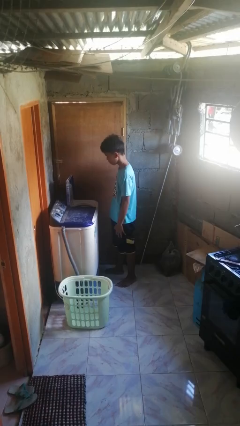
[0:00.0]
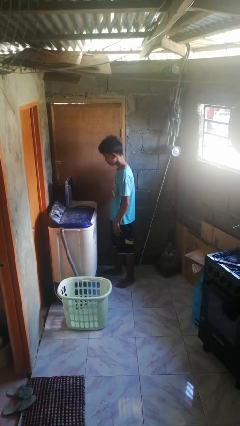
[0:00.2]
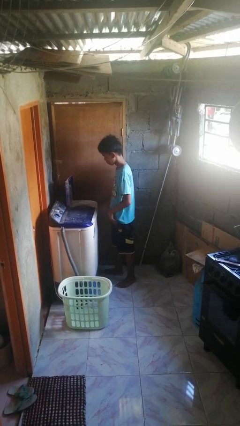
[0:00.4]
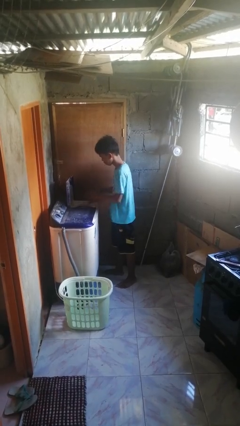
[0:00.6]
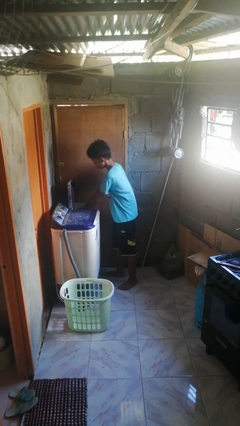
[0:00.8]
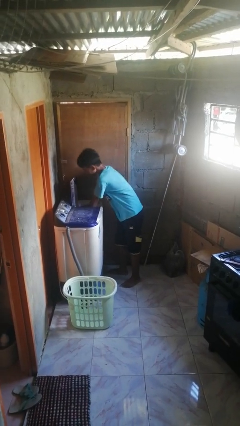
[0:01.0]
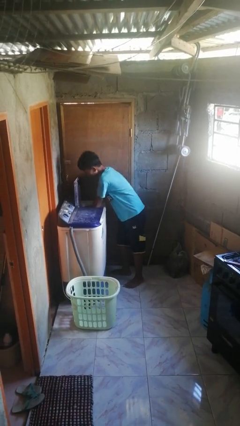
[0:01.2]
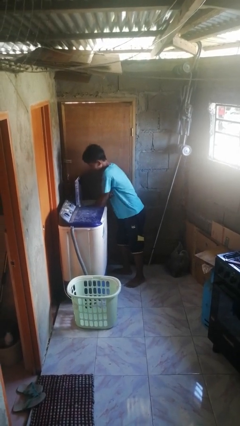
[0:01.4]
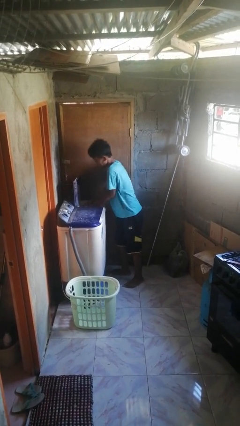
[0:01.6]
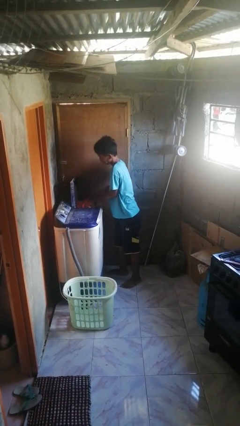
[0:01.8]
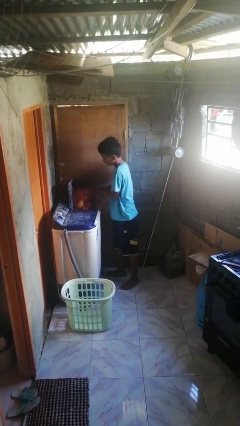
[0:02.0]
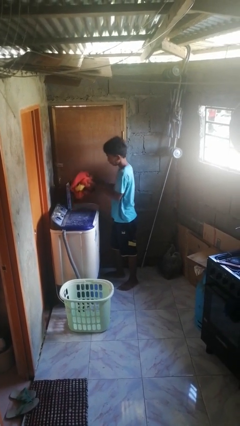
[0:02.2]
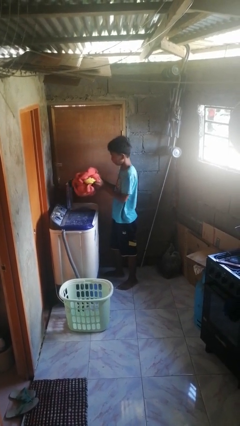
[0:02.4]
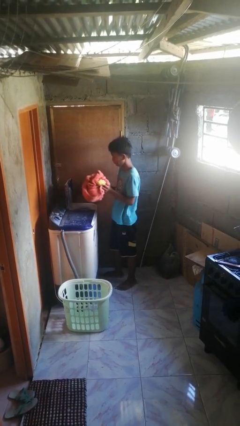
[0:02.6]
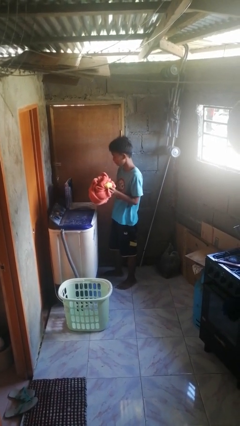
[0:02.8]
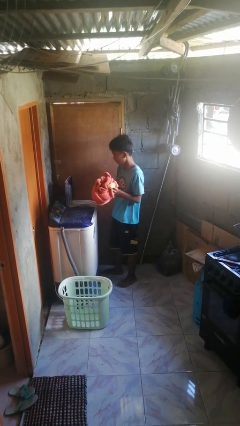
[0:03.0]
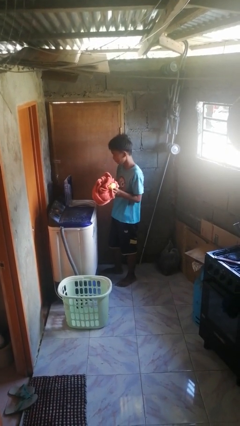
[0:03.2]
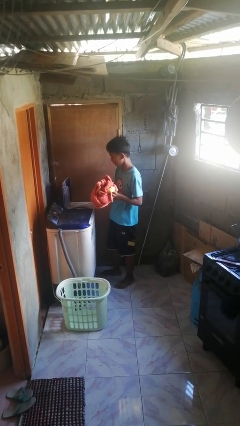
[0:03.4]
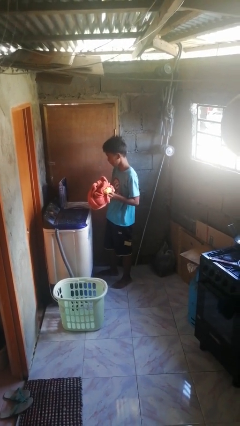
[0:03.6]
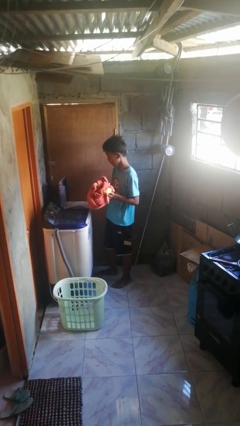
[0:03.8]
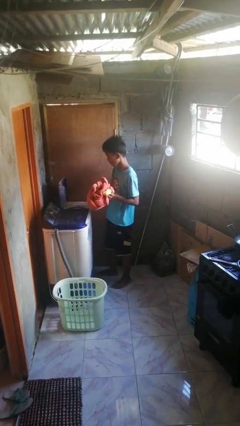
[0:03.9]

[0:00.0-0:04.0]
person unloads dryer

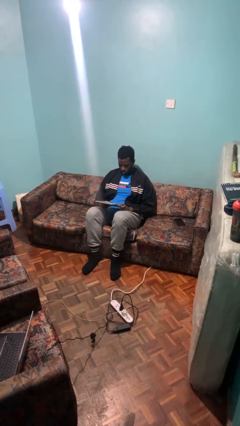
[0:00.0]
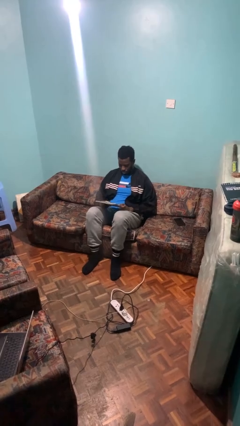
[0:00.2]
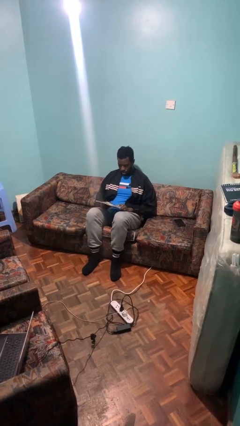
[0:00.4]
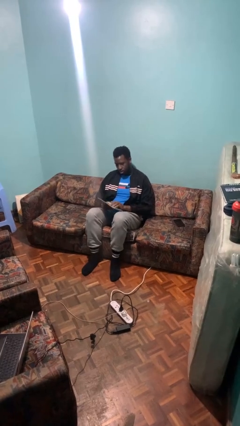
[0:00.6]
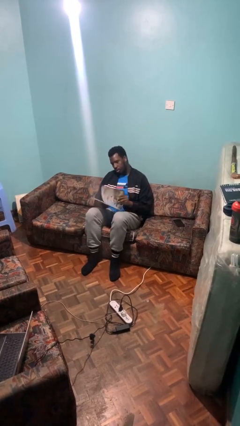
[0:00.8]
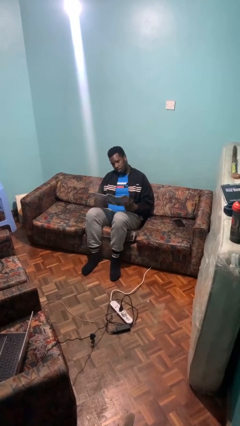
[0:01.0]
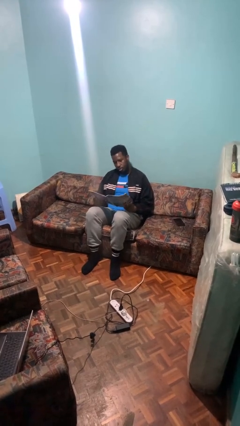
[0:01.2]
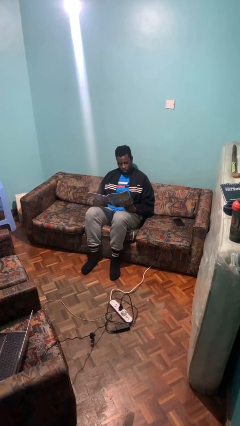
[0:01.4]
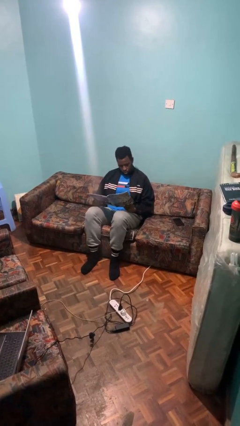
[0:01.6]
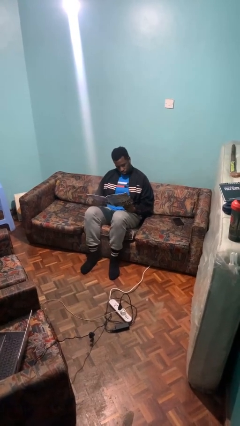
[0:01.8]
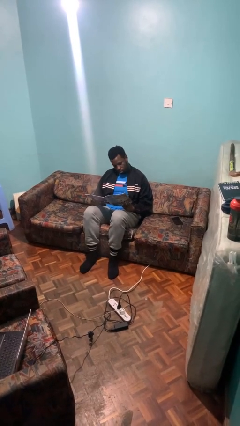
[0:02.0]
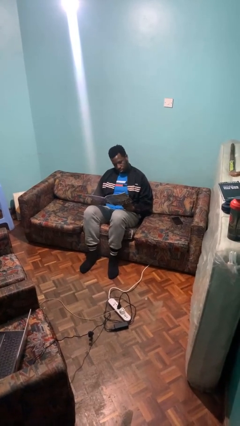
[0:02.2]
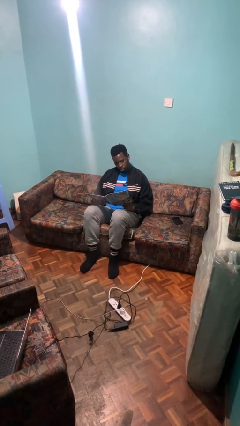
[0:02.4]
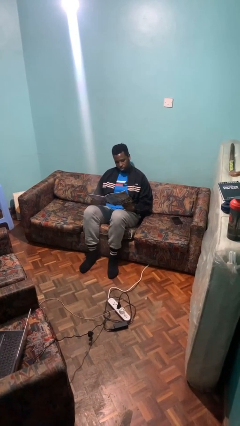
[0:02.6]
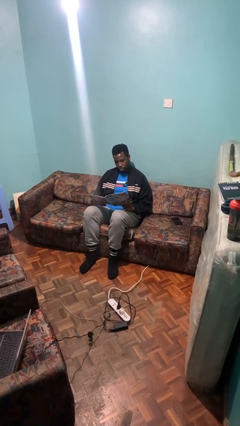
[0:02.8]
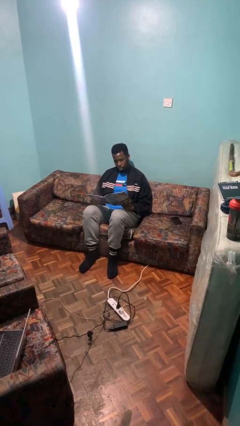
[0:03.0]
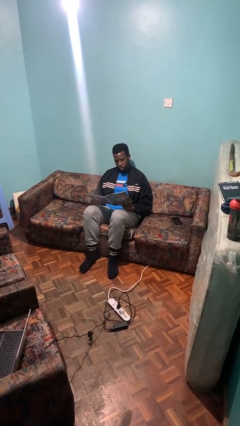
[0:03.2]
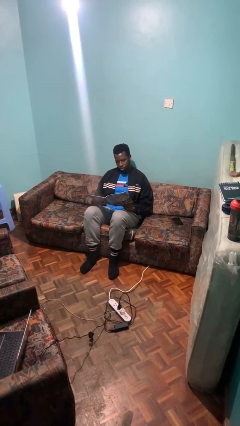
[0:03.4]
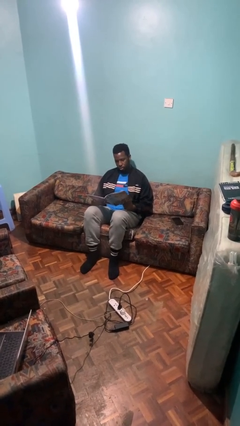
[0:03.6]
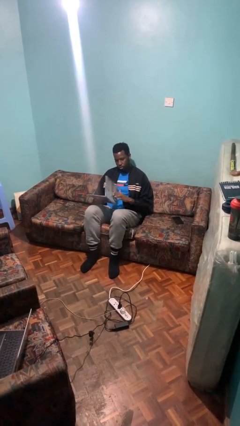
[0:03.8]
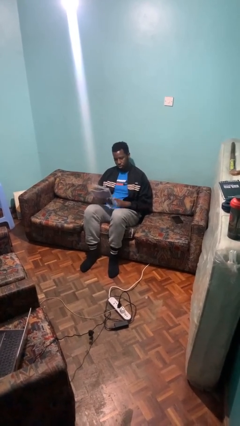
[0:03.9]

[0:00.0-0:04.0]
person reads magazine

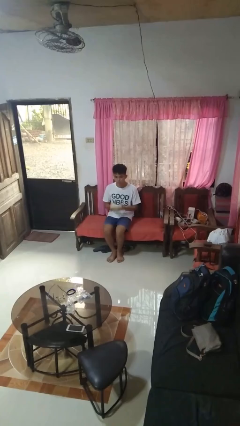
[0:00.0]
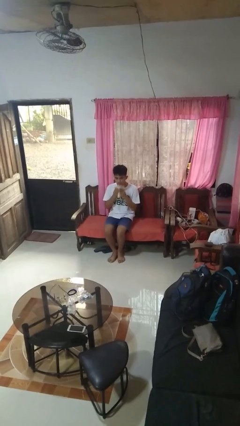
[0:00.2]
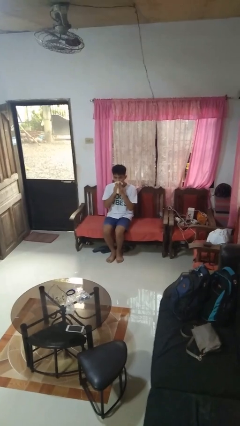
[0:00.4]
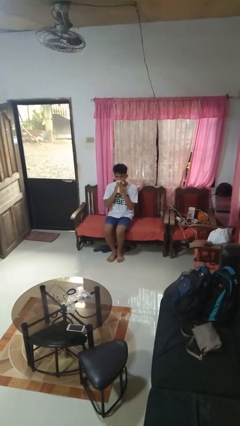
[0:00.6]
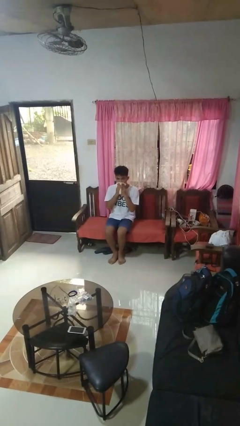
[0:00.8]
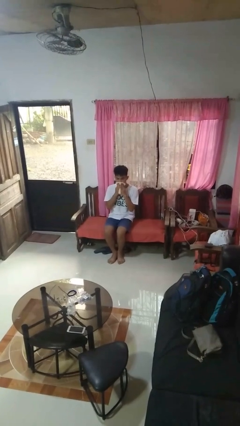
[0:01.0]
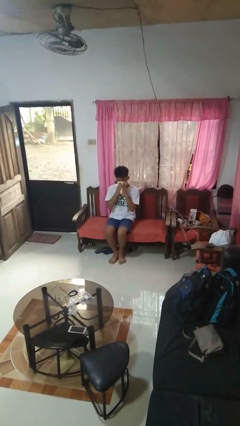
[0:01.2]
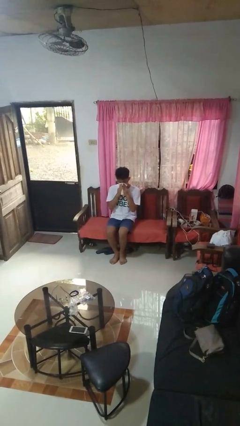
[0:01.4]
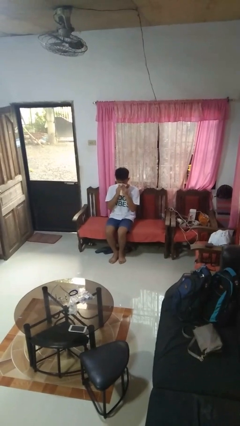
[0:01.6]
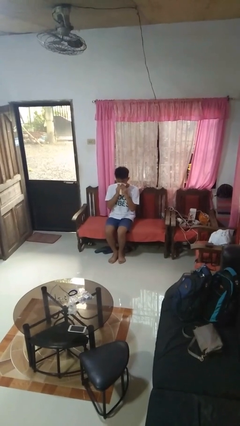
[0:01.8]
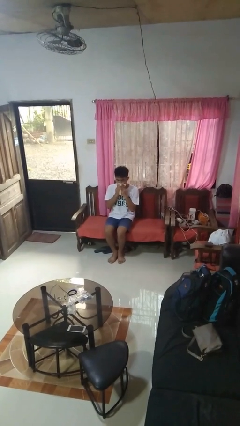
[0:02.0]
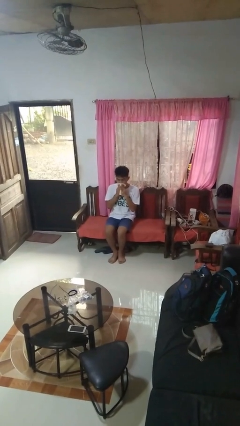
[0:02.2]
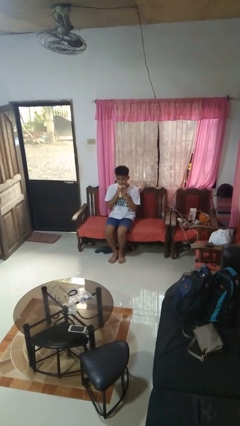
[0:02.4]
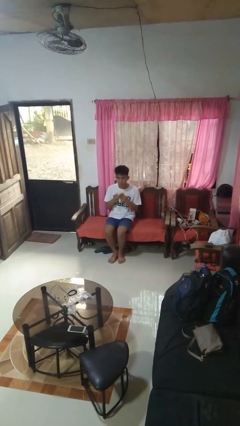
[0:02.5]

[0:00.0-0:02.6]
person wipes mouth with napkin

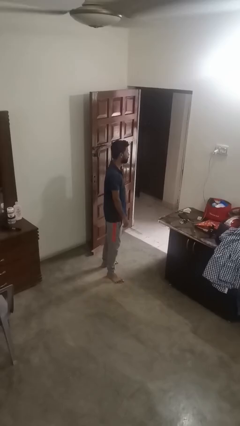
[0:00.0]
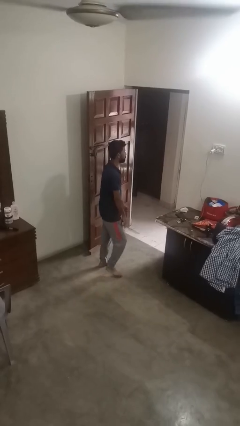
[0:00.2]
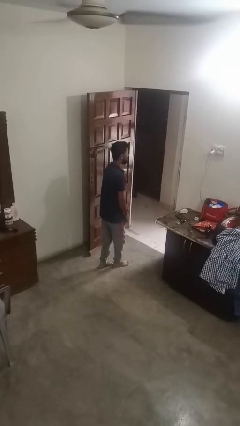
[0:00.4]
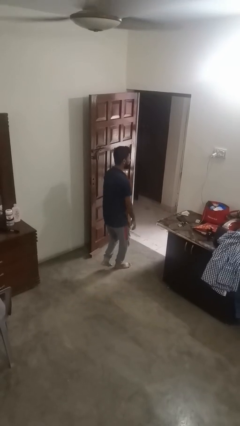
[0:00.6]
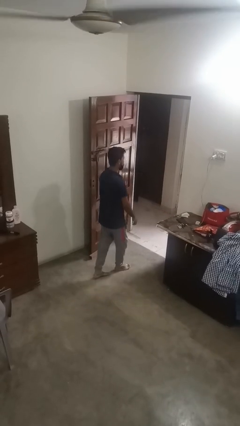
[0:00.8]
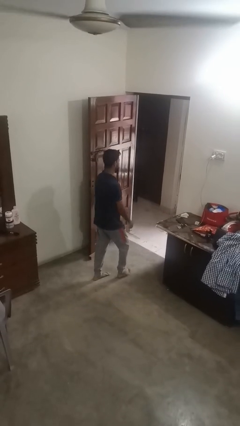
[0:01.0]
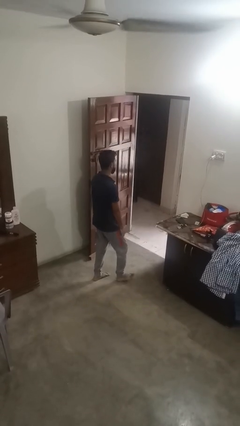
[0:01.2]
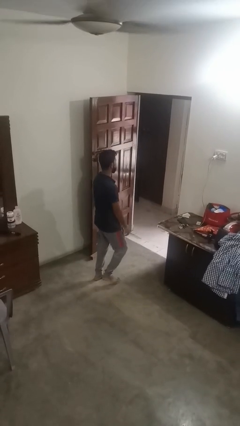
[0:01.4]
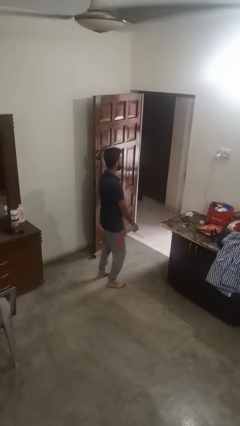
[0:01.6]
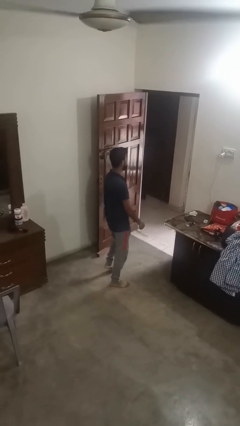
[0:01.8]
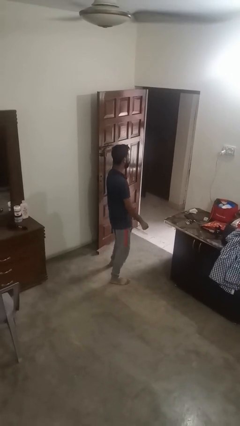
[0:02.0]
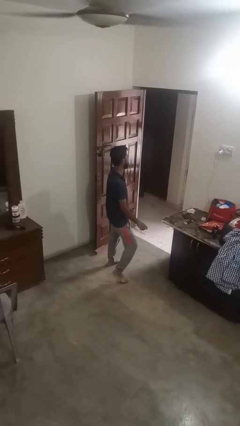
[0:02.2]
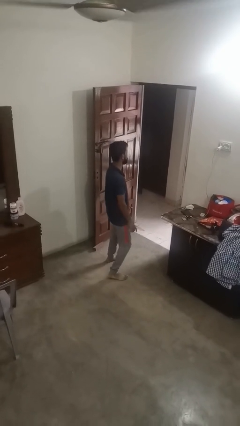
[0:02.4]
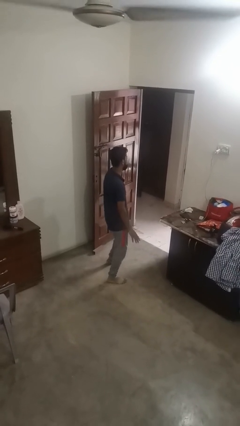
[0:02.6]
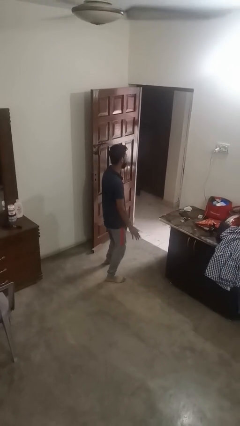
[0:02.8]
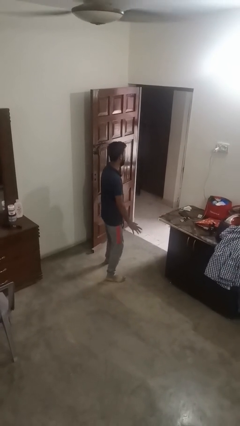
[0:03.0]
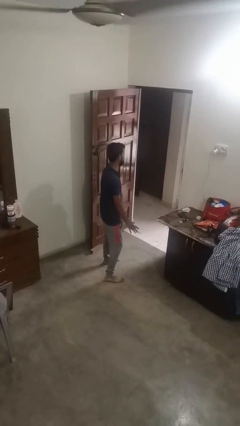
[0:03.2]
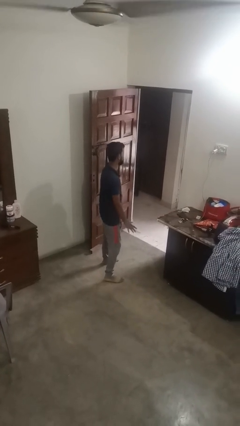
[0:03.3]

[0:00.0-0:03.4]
person dances in place

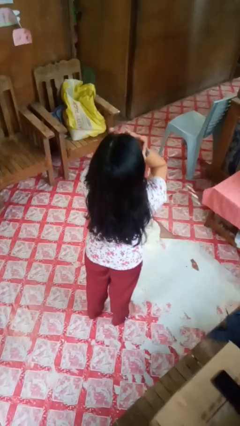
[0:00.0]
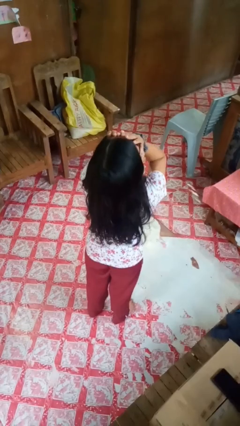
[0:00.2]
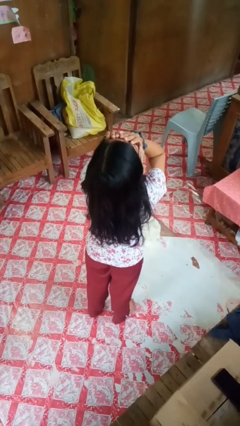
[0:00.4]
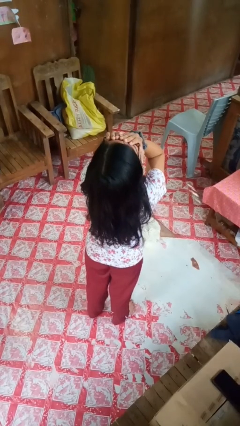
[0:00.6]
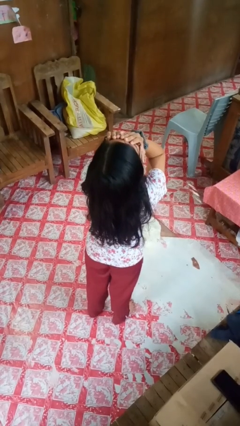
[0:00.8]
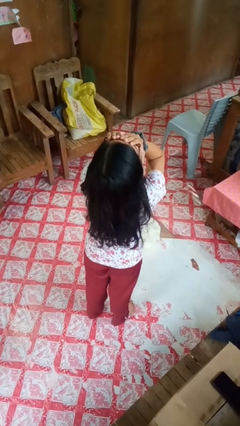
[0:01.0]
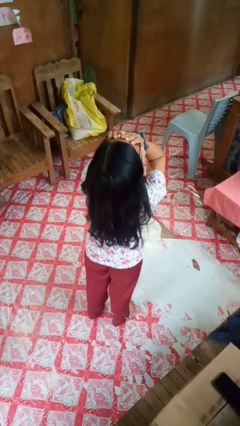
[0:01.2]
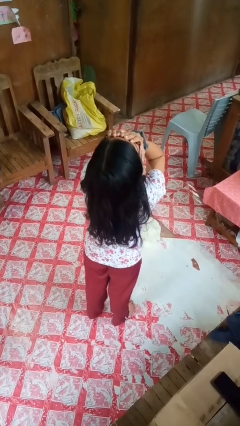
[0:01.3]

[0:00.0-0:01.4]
person covers face with hands

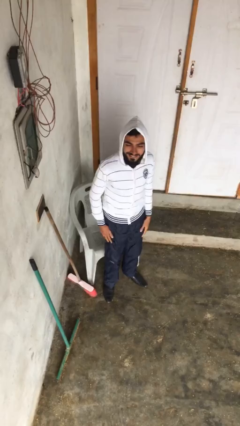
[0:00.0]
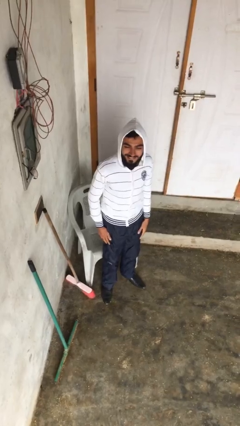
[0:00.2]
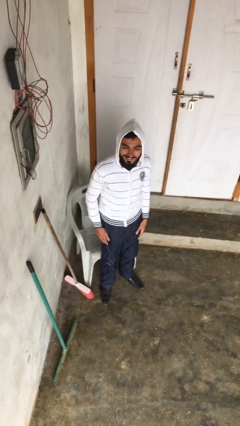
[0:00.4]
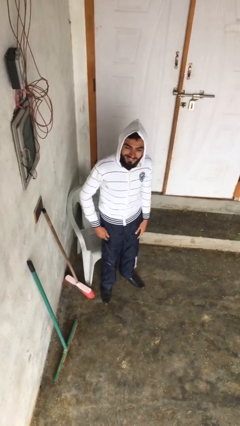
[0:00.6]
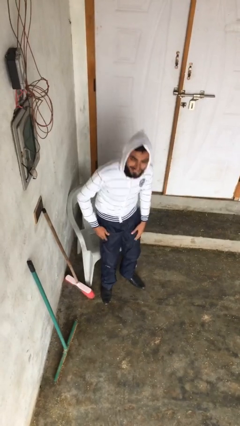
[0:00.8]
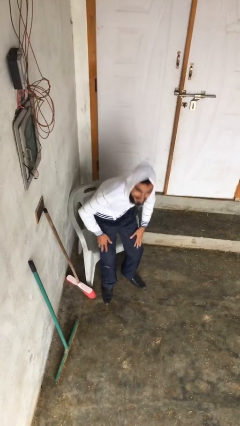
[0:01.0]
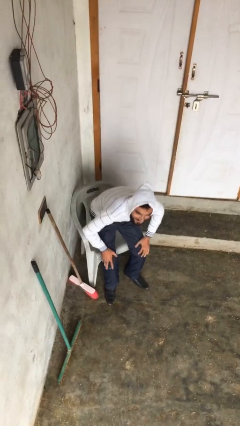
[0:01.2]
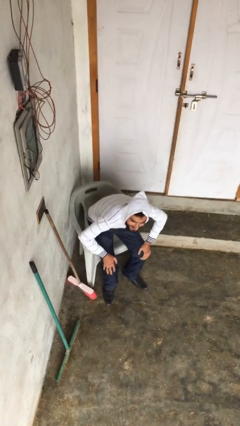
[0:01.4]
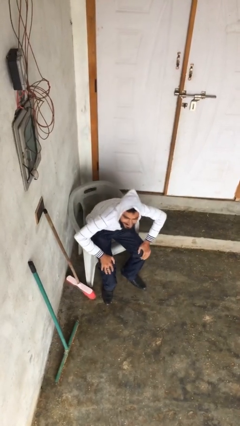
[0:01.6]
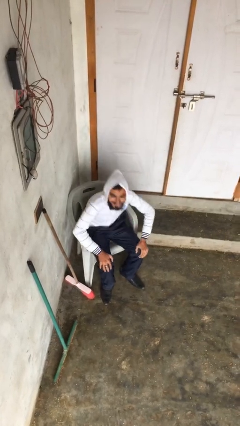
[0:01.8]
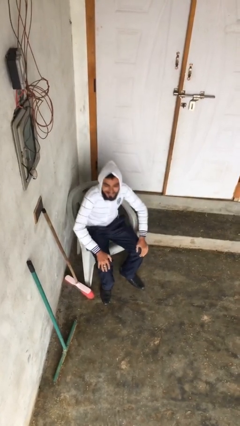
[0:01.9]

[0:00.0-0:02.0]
person sits down
